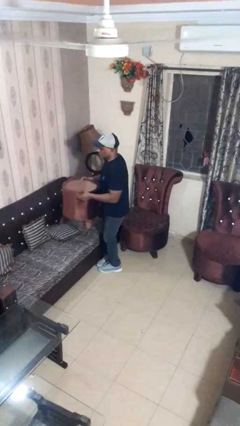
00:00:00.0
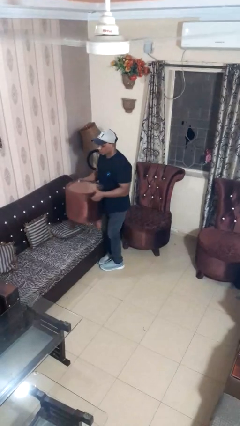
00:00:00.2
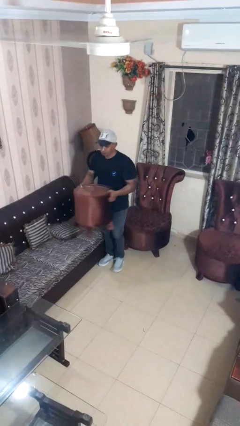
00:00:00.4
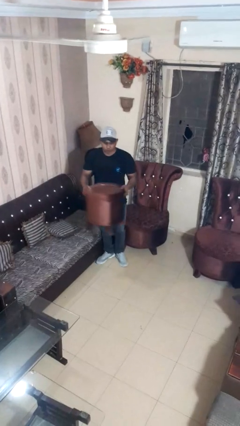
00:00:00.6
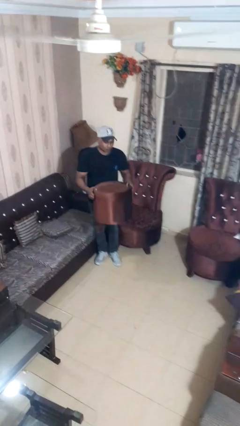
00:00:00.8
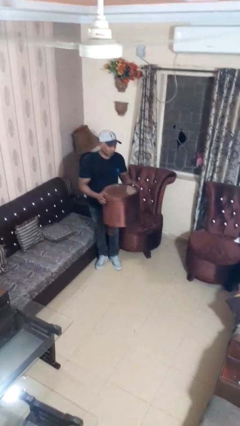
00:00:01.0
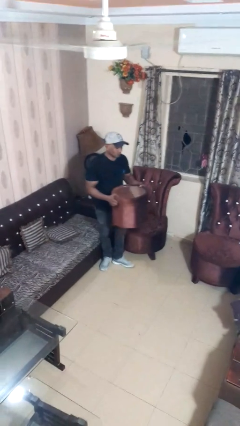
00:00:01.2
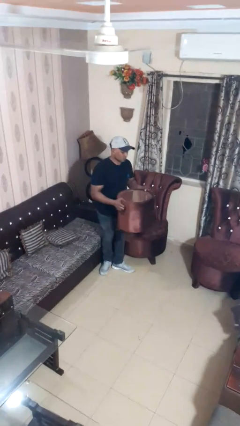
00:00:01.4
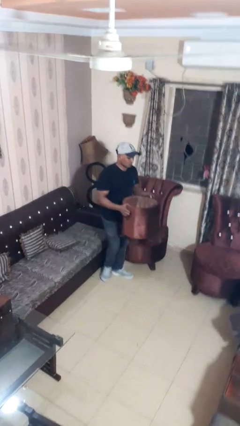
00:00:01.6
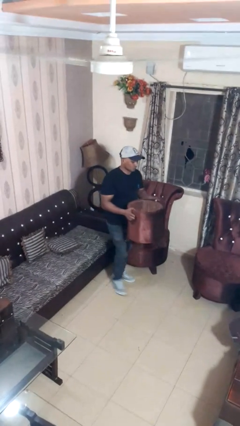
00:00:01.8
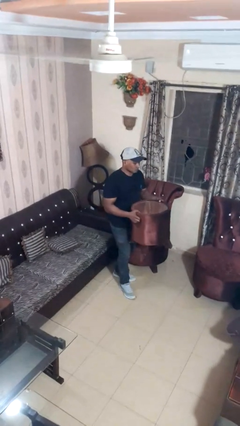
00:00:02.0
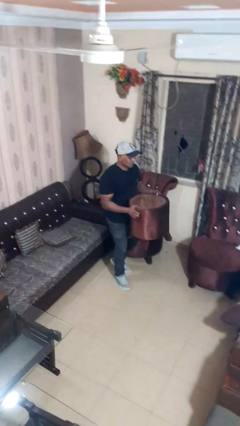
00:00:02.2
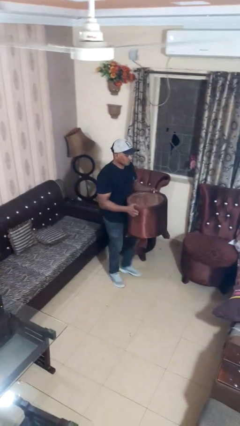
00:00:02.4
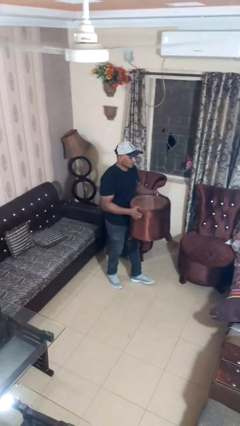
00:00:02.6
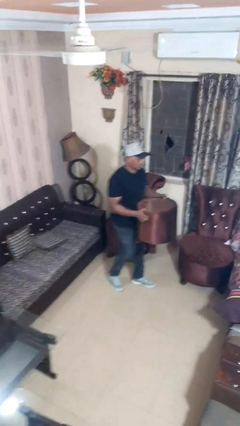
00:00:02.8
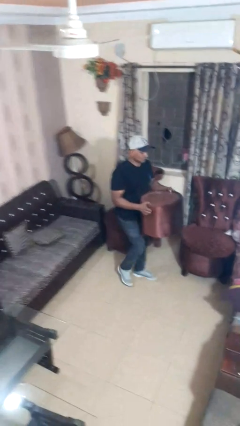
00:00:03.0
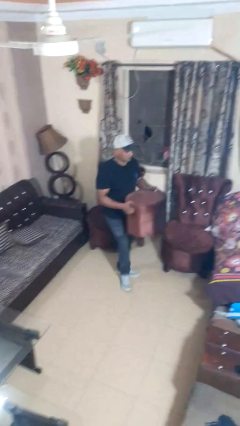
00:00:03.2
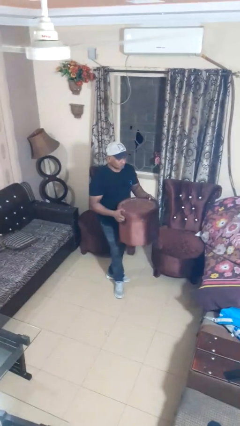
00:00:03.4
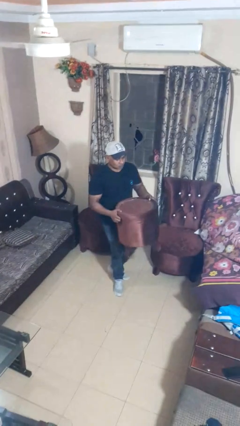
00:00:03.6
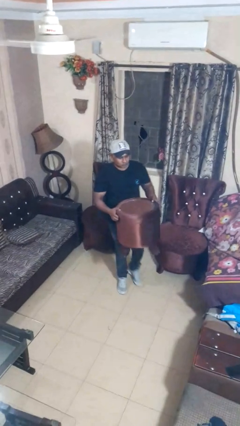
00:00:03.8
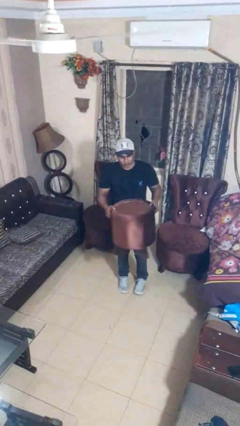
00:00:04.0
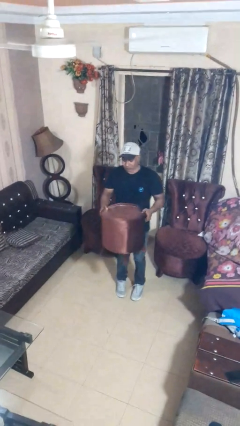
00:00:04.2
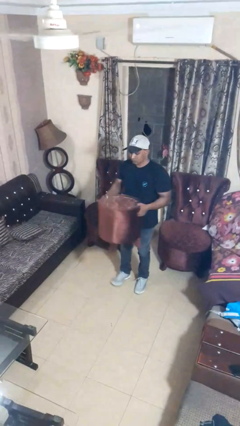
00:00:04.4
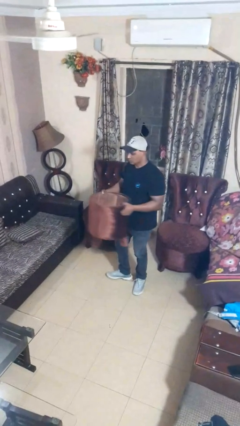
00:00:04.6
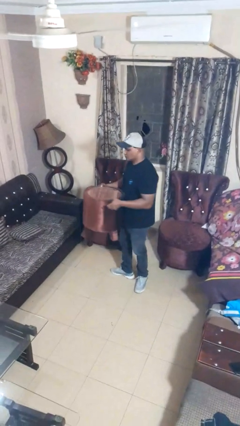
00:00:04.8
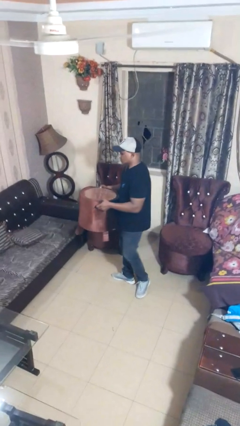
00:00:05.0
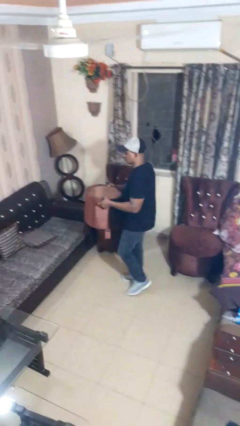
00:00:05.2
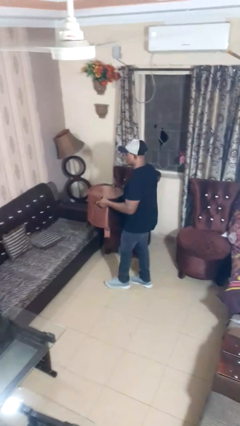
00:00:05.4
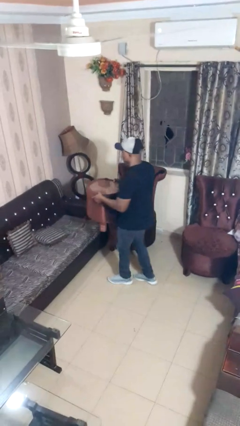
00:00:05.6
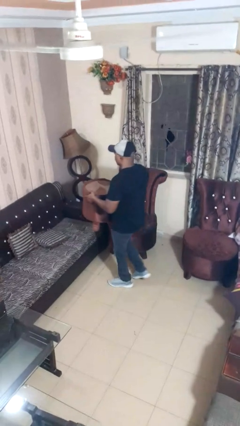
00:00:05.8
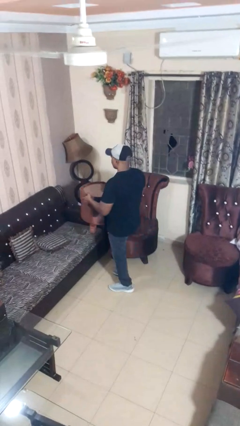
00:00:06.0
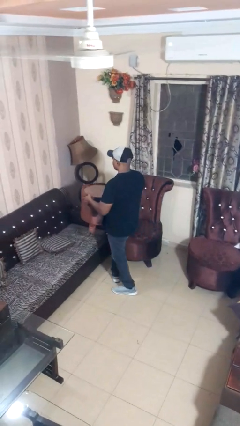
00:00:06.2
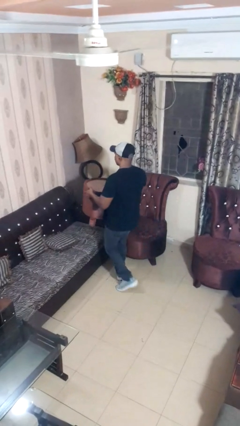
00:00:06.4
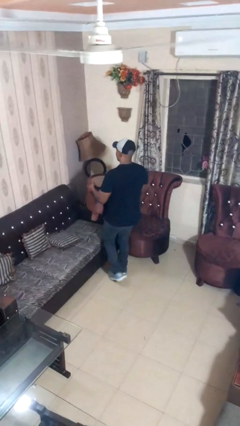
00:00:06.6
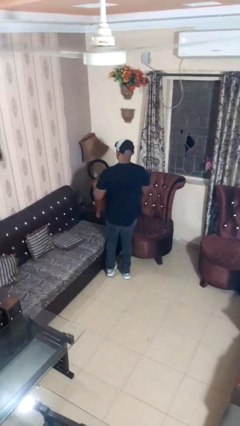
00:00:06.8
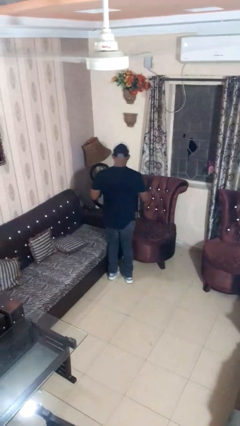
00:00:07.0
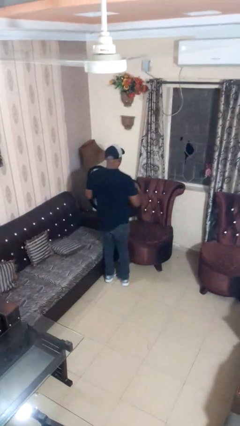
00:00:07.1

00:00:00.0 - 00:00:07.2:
person carries furniture

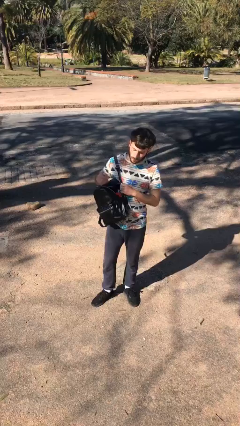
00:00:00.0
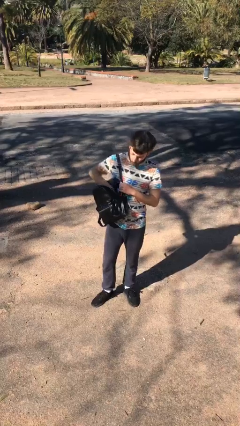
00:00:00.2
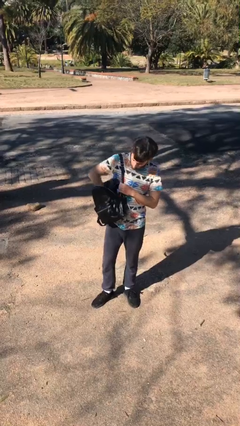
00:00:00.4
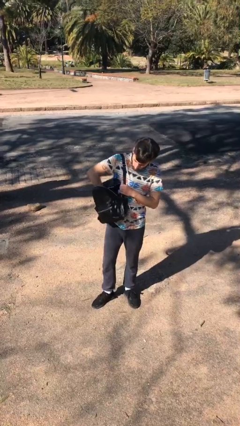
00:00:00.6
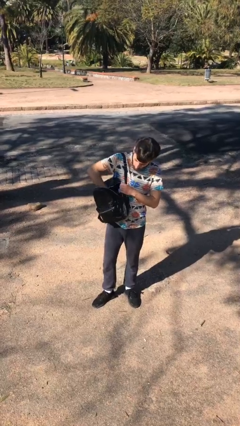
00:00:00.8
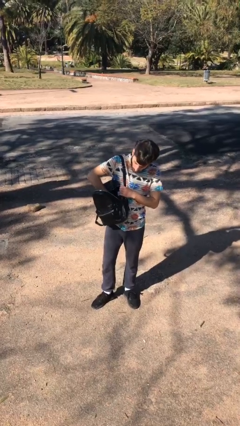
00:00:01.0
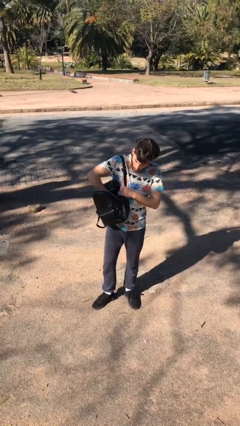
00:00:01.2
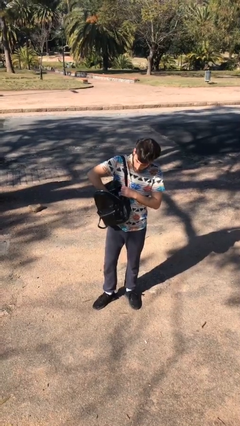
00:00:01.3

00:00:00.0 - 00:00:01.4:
person searches in backpack

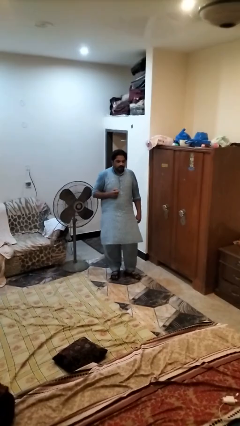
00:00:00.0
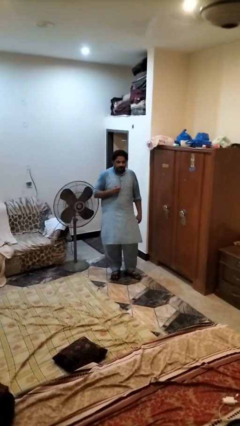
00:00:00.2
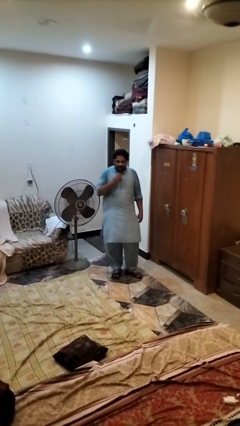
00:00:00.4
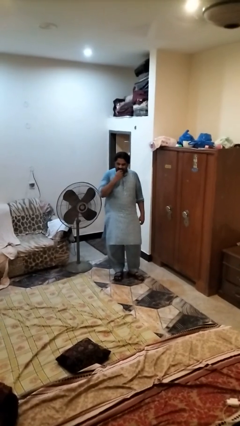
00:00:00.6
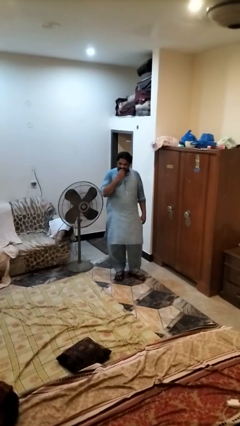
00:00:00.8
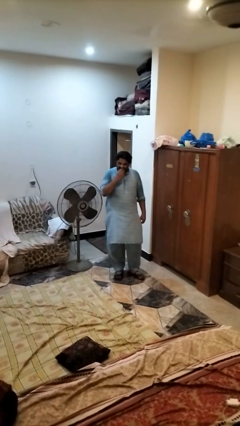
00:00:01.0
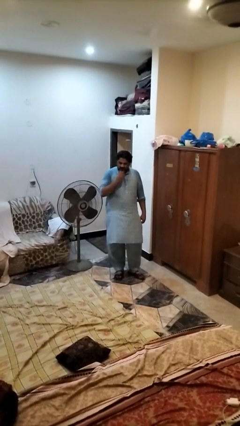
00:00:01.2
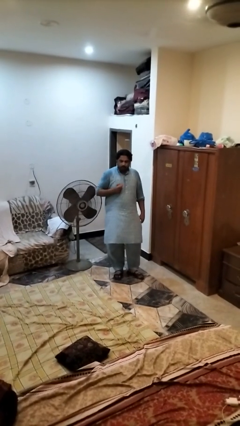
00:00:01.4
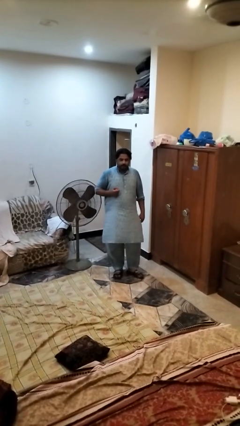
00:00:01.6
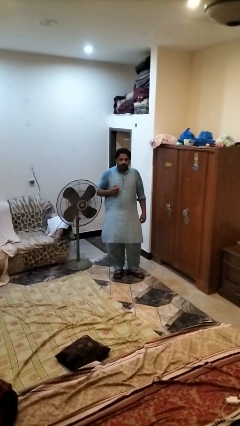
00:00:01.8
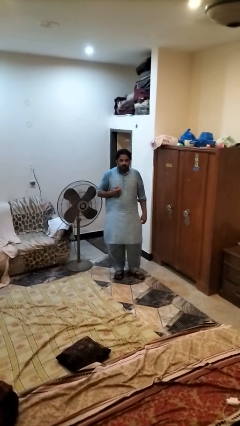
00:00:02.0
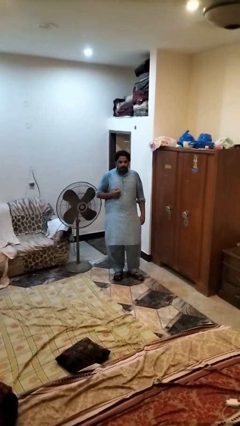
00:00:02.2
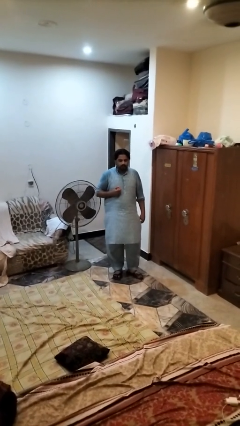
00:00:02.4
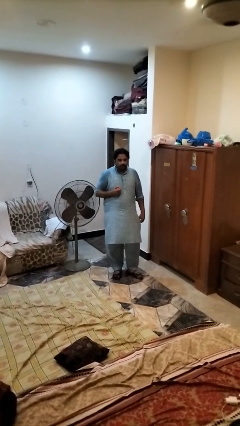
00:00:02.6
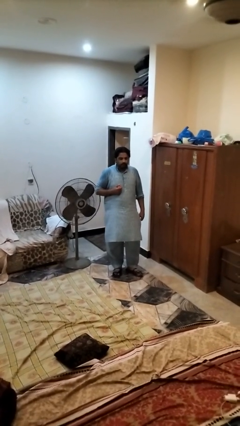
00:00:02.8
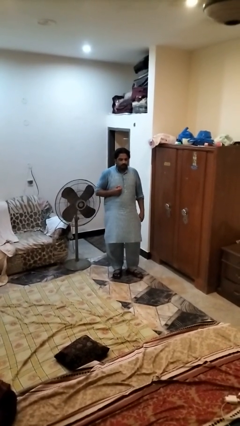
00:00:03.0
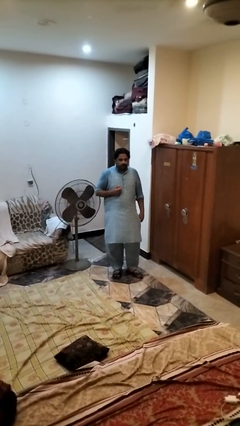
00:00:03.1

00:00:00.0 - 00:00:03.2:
person eats apple

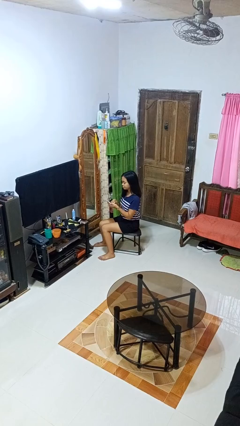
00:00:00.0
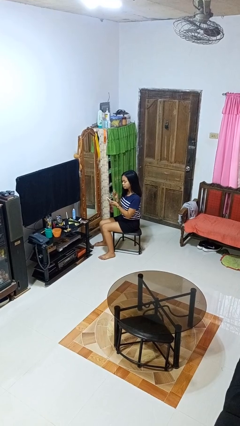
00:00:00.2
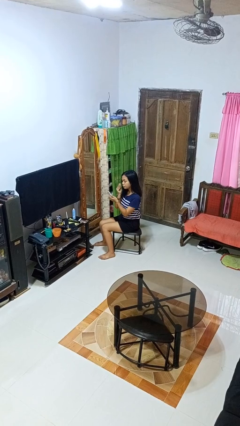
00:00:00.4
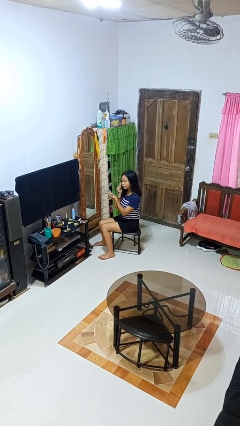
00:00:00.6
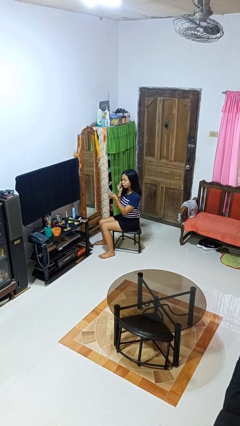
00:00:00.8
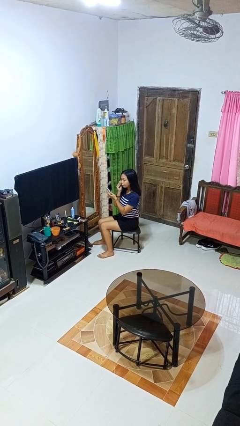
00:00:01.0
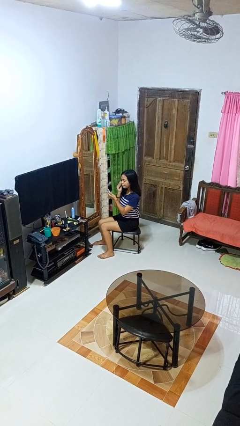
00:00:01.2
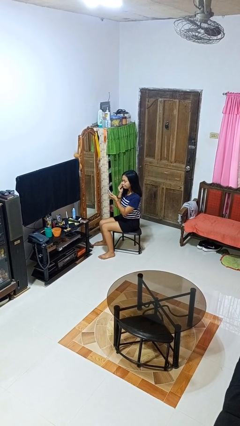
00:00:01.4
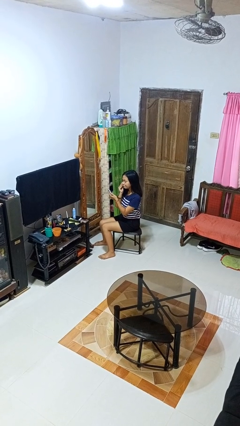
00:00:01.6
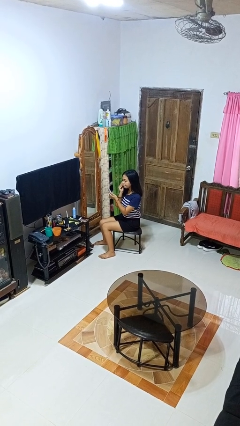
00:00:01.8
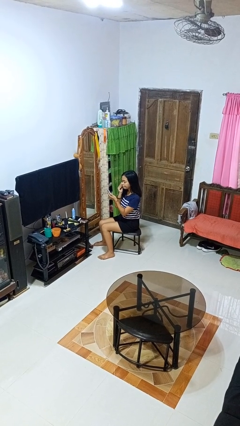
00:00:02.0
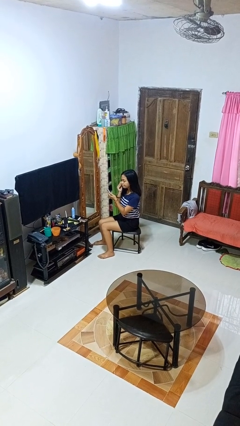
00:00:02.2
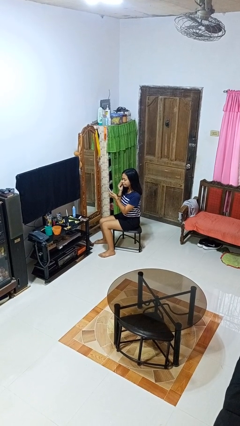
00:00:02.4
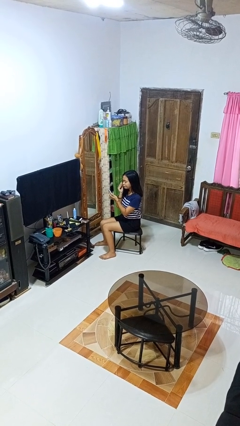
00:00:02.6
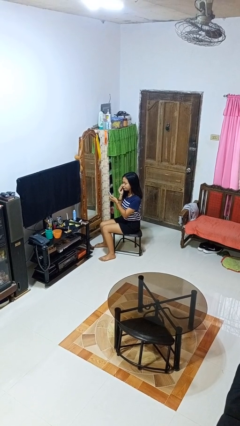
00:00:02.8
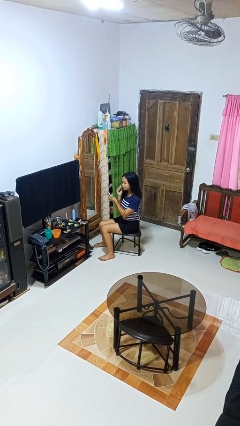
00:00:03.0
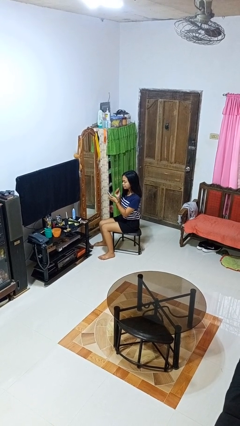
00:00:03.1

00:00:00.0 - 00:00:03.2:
person applies foundation makeup

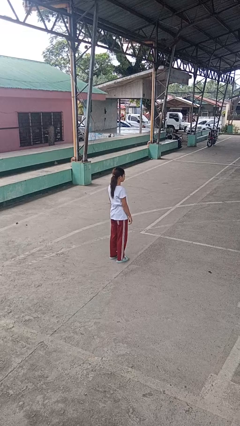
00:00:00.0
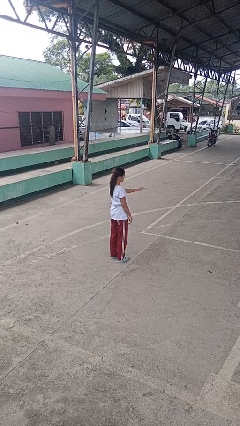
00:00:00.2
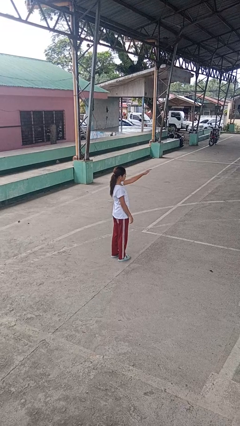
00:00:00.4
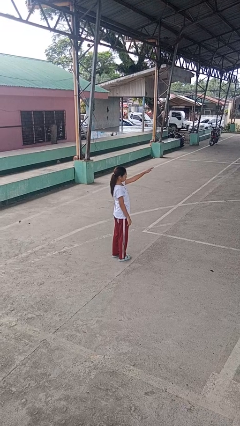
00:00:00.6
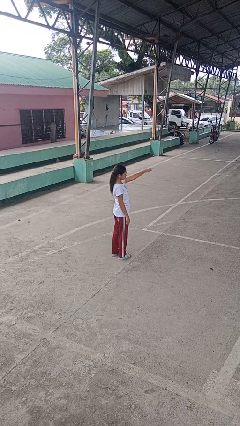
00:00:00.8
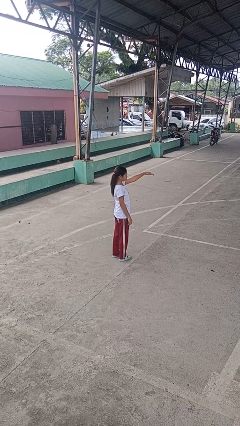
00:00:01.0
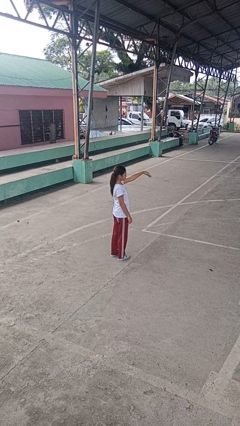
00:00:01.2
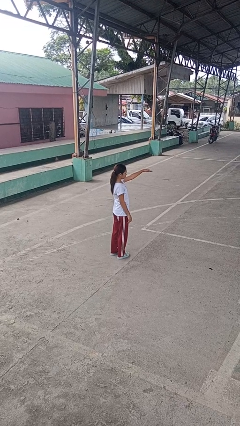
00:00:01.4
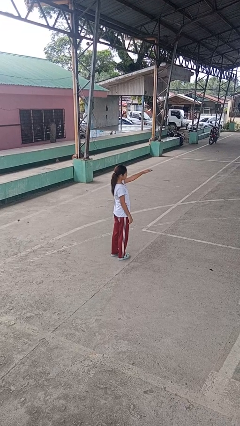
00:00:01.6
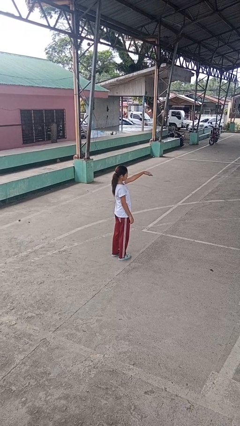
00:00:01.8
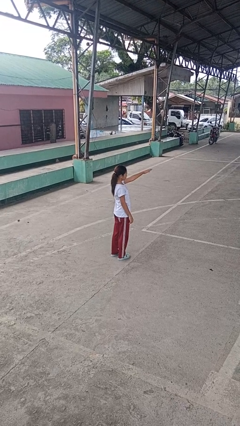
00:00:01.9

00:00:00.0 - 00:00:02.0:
person gestures come here

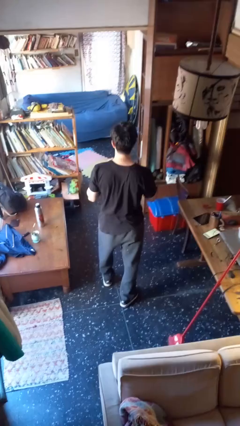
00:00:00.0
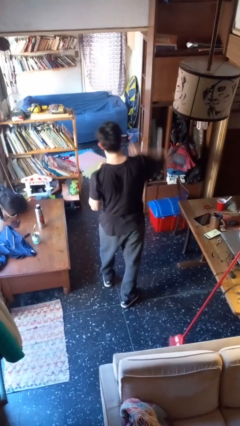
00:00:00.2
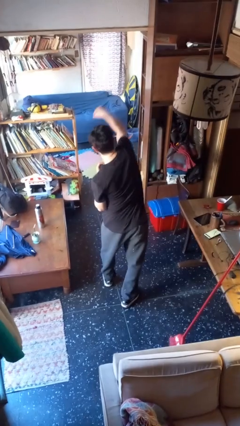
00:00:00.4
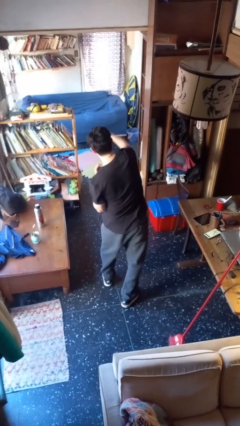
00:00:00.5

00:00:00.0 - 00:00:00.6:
person punches
